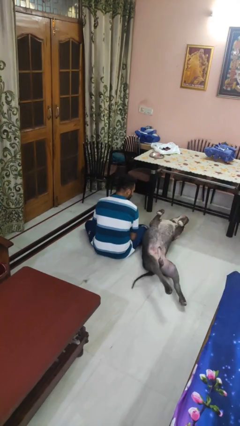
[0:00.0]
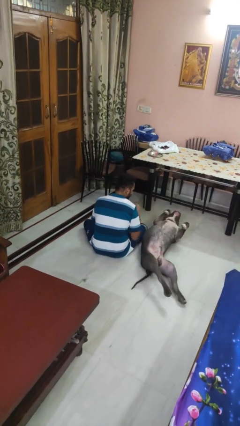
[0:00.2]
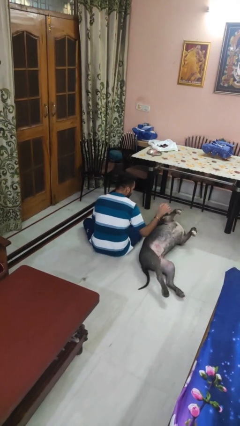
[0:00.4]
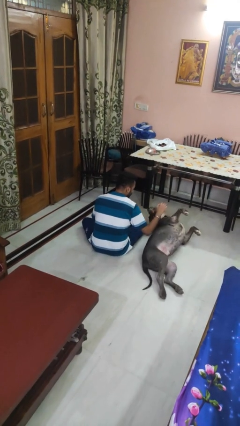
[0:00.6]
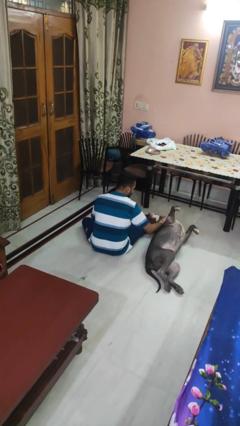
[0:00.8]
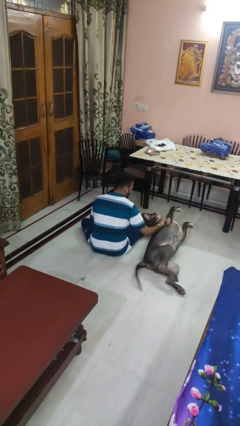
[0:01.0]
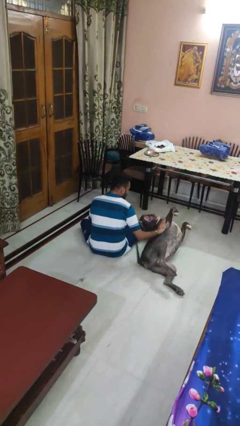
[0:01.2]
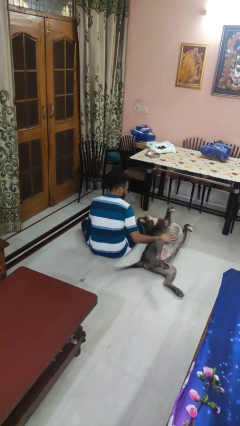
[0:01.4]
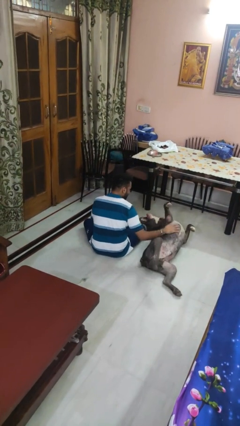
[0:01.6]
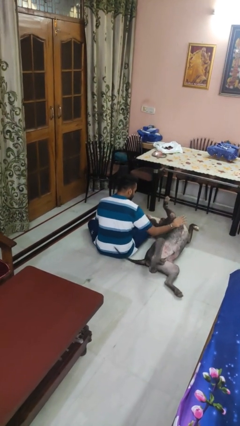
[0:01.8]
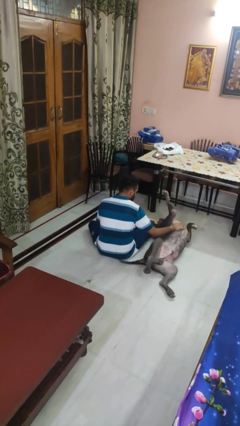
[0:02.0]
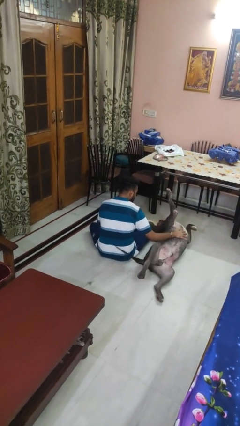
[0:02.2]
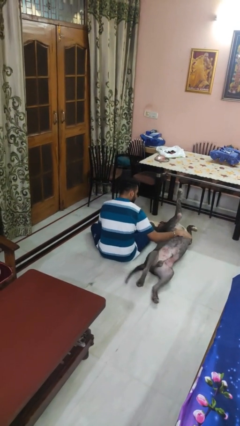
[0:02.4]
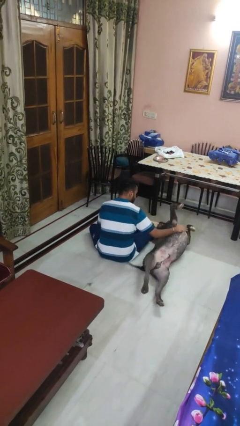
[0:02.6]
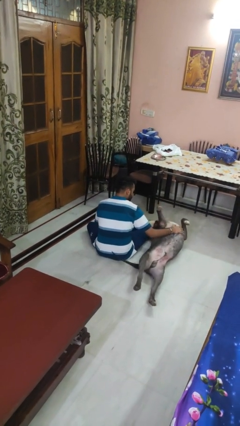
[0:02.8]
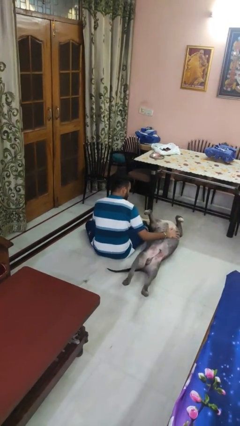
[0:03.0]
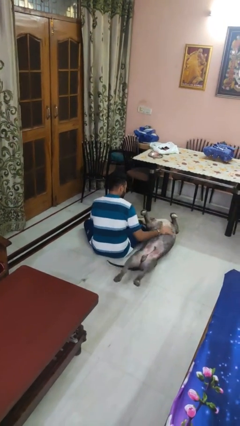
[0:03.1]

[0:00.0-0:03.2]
person pets dog

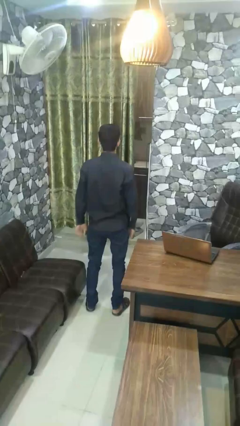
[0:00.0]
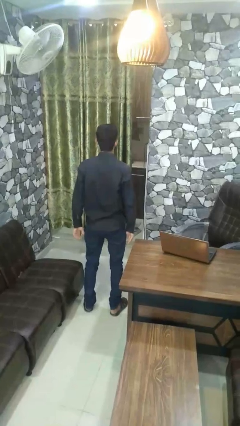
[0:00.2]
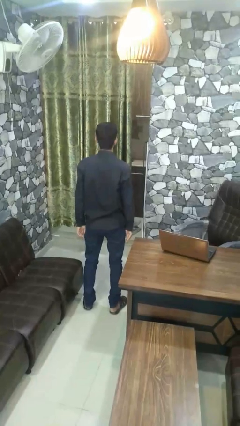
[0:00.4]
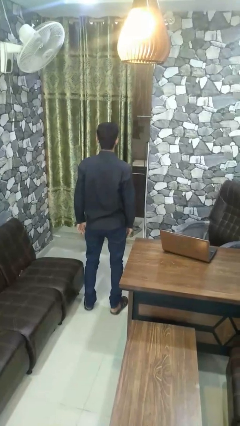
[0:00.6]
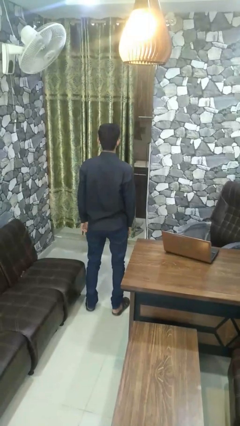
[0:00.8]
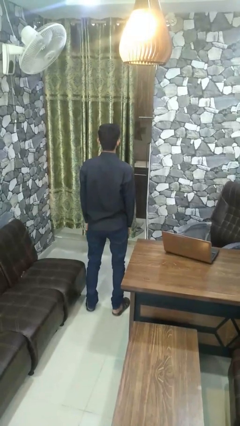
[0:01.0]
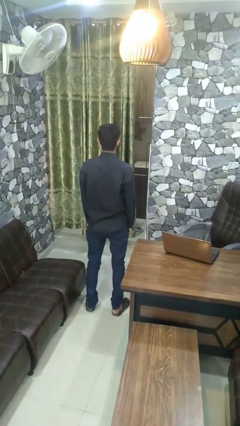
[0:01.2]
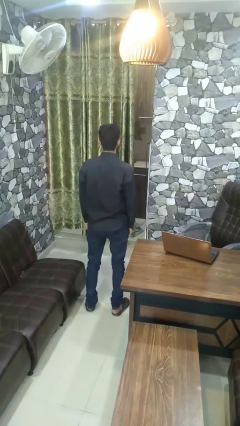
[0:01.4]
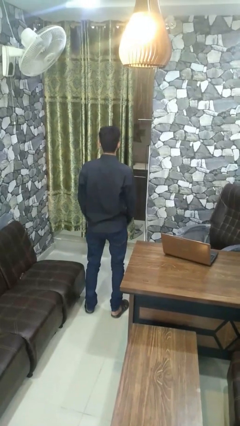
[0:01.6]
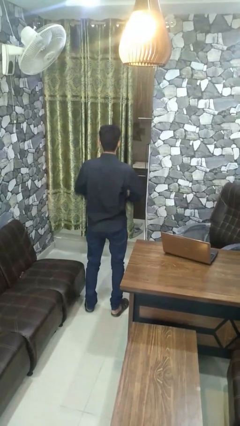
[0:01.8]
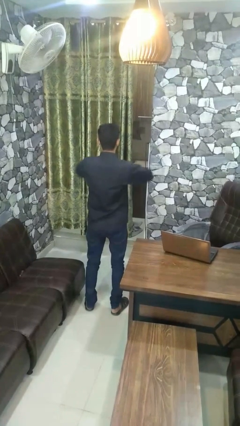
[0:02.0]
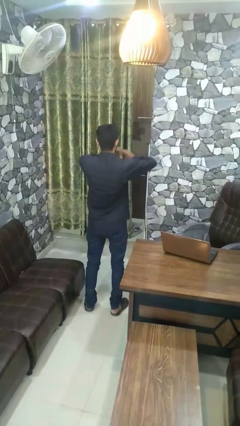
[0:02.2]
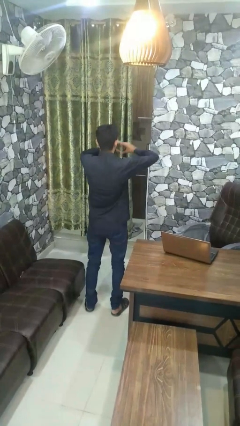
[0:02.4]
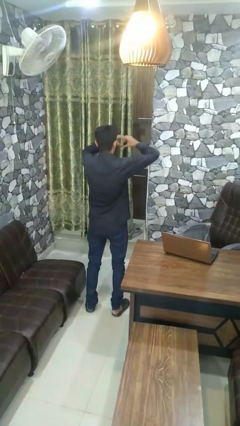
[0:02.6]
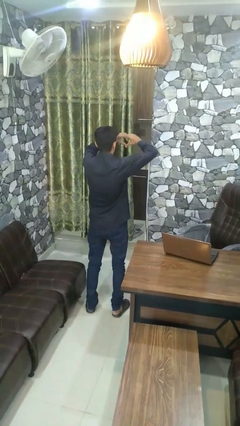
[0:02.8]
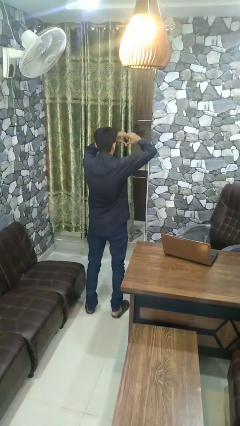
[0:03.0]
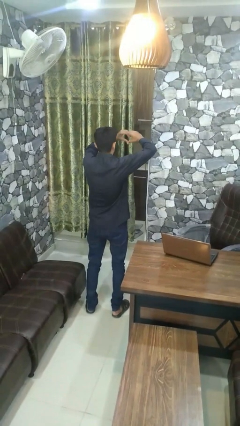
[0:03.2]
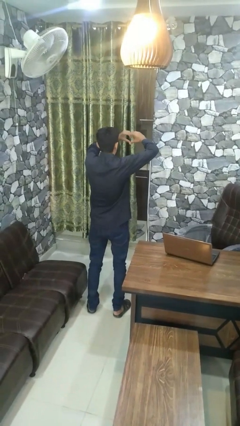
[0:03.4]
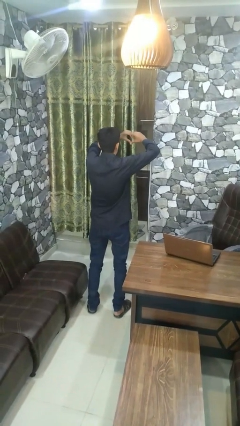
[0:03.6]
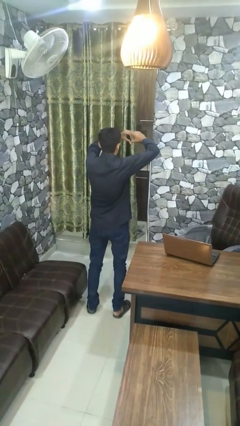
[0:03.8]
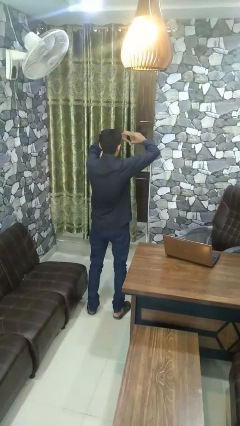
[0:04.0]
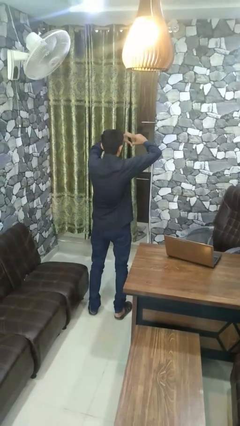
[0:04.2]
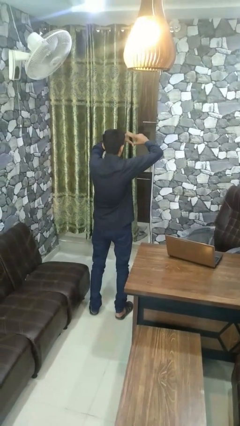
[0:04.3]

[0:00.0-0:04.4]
person gestures heart

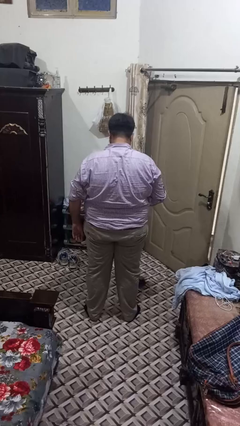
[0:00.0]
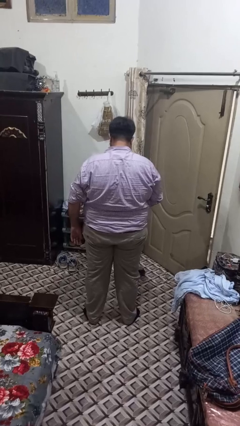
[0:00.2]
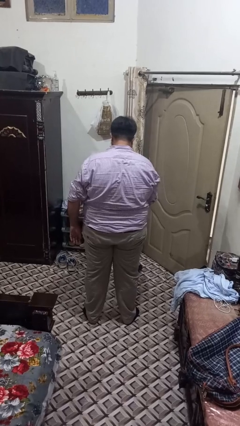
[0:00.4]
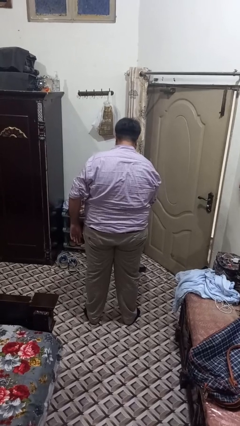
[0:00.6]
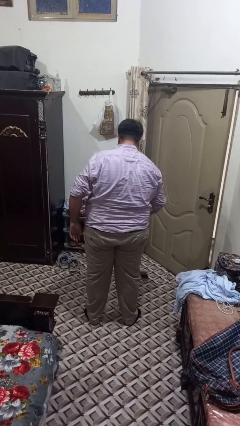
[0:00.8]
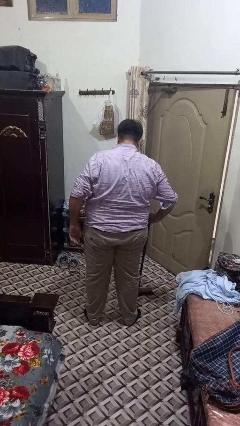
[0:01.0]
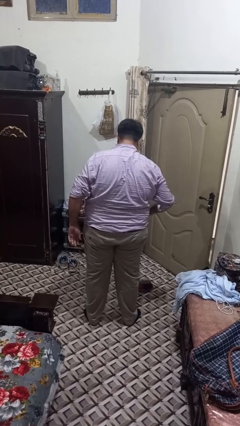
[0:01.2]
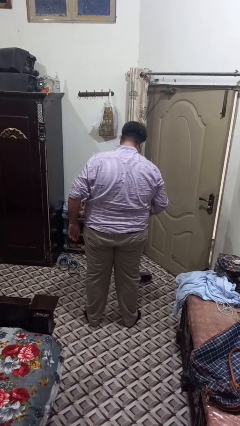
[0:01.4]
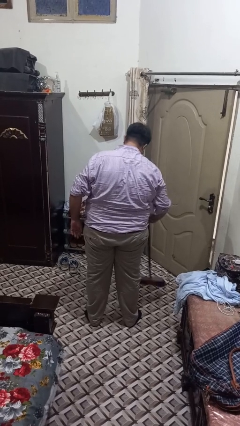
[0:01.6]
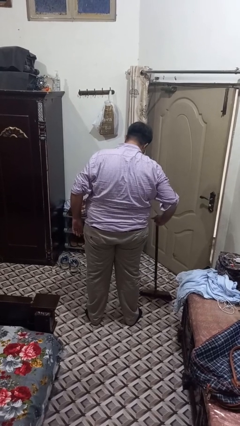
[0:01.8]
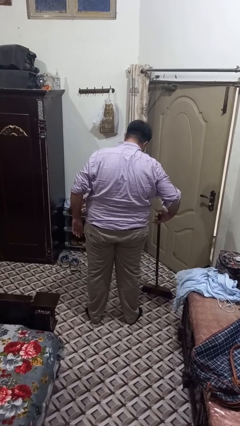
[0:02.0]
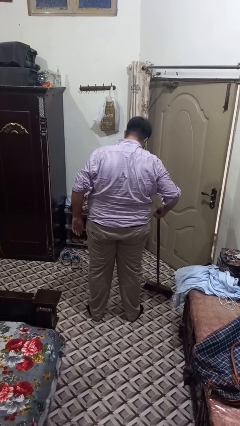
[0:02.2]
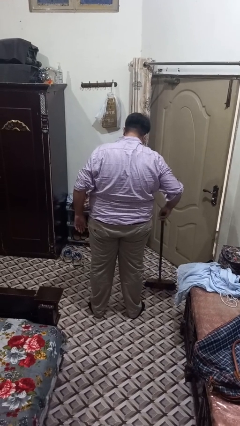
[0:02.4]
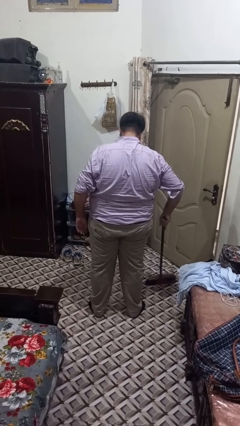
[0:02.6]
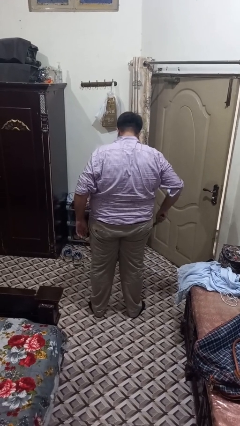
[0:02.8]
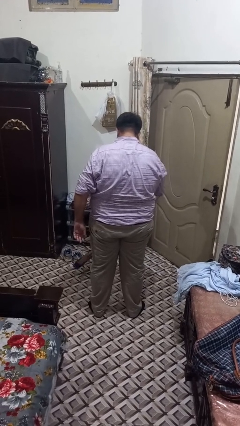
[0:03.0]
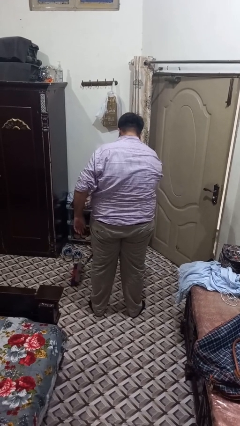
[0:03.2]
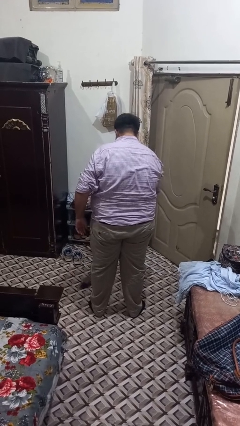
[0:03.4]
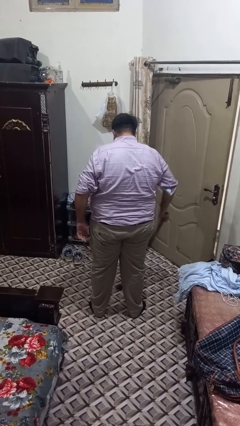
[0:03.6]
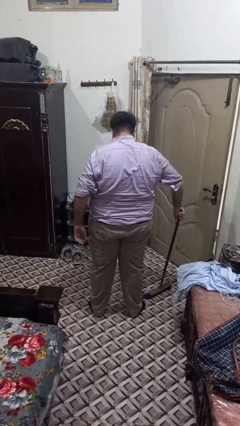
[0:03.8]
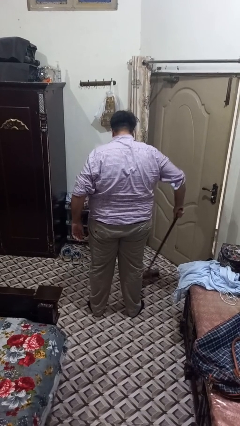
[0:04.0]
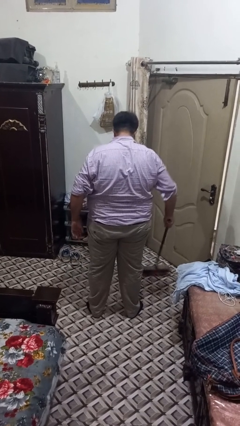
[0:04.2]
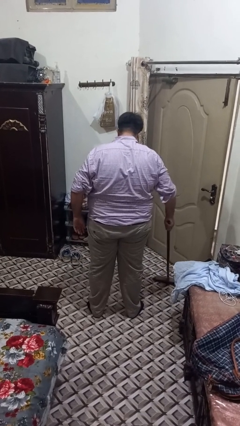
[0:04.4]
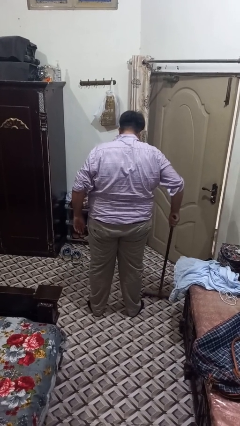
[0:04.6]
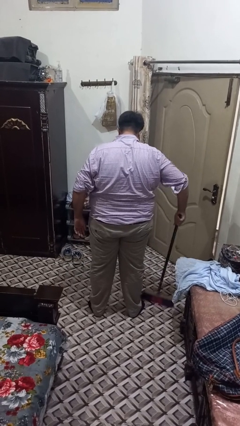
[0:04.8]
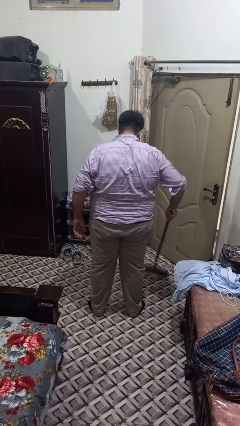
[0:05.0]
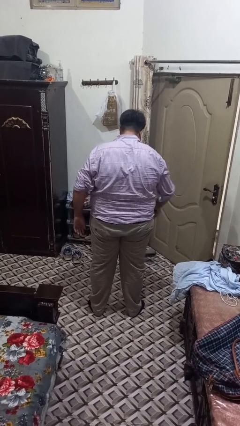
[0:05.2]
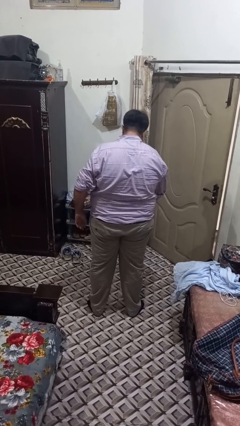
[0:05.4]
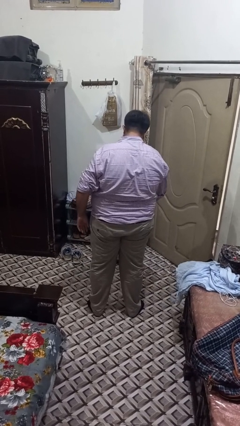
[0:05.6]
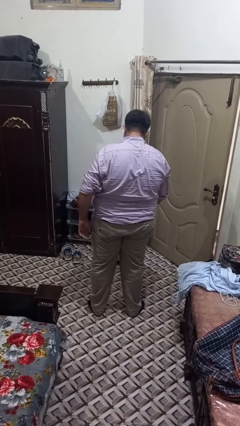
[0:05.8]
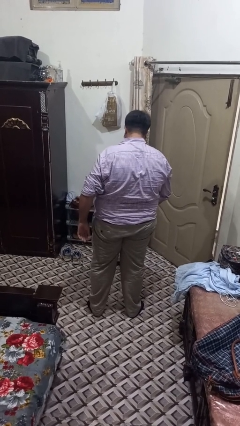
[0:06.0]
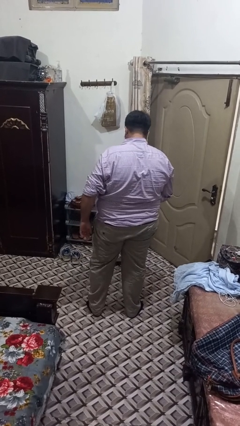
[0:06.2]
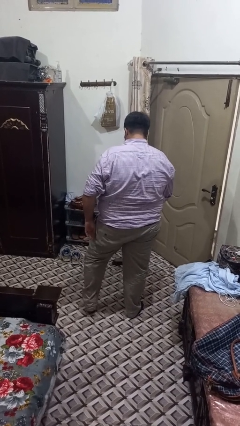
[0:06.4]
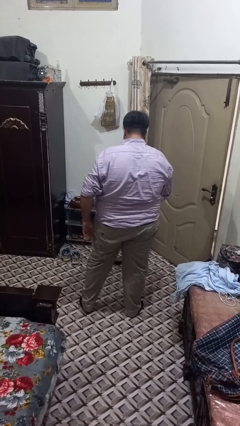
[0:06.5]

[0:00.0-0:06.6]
person sweeps floor

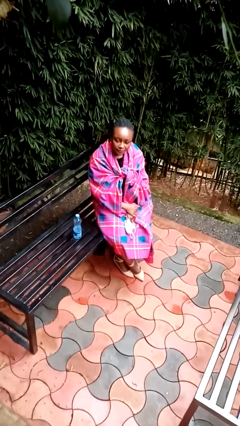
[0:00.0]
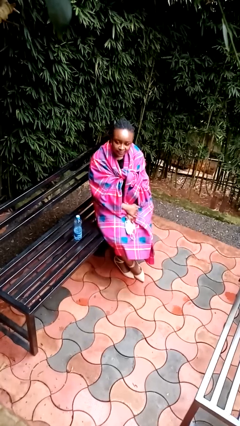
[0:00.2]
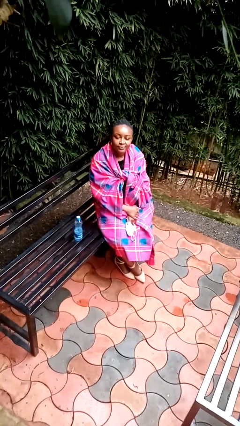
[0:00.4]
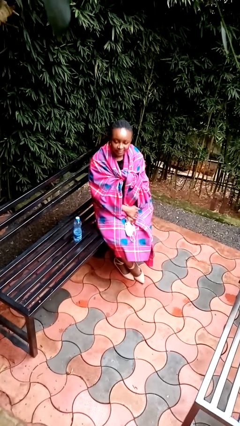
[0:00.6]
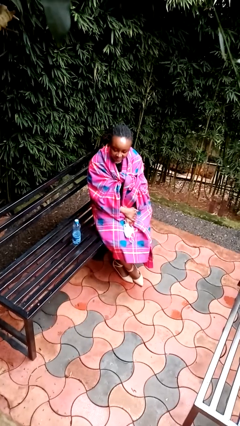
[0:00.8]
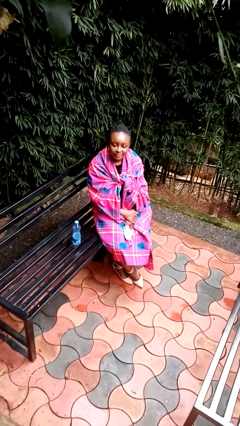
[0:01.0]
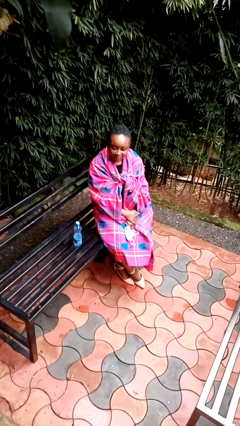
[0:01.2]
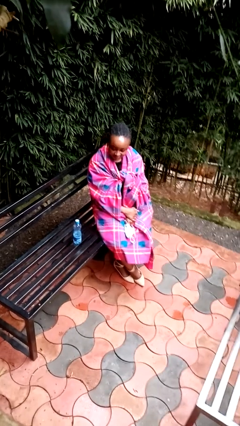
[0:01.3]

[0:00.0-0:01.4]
person nods head

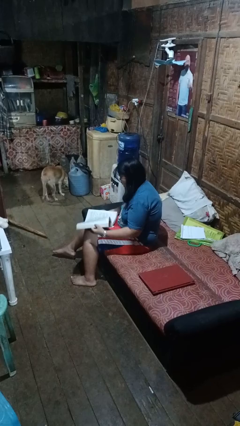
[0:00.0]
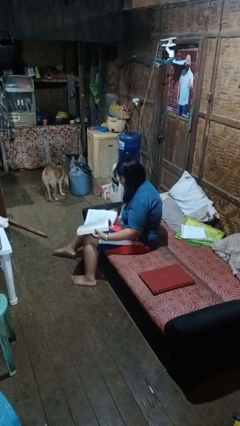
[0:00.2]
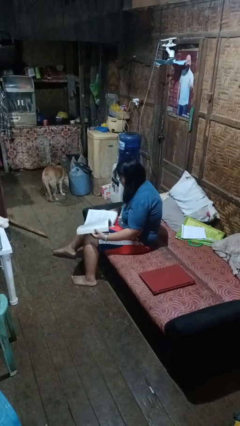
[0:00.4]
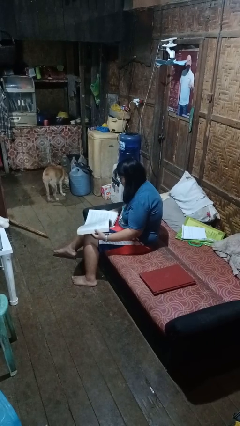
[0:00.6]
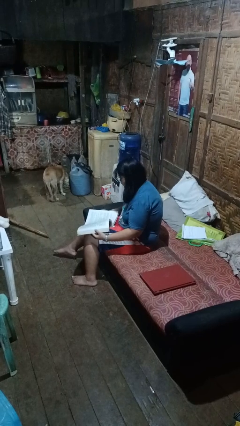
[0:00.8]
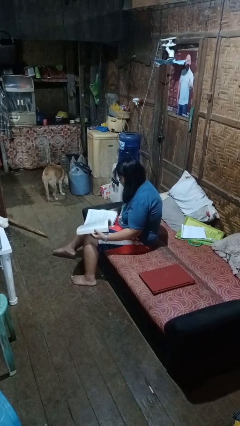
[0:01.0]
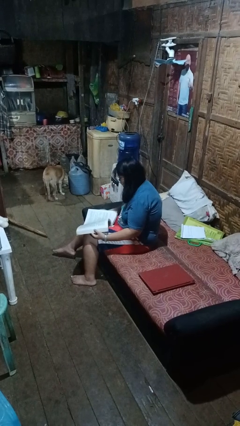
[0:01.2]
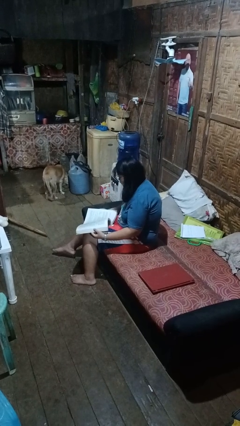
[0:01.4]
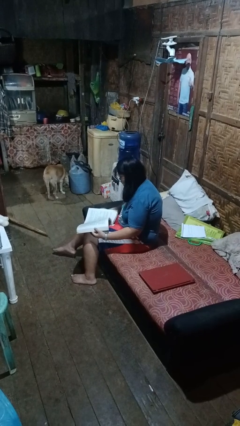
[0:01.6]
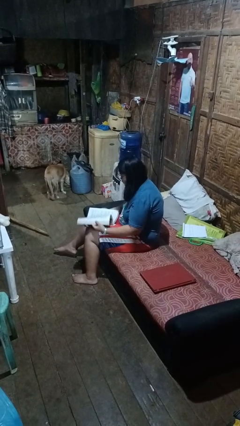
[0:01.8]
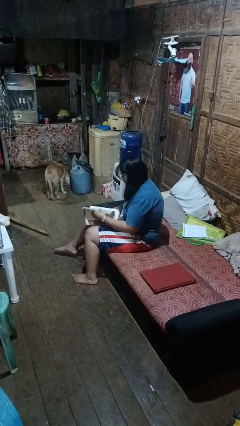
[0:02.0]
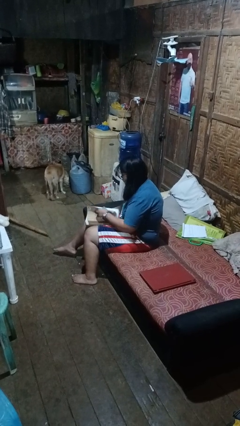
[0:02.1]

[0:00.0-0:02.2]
person reads book
